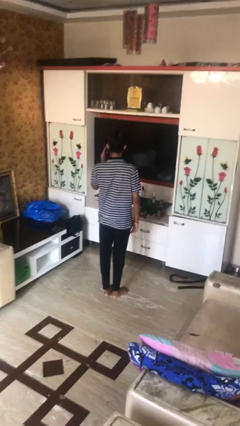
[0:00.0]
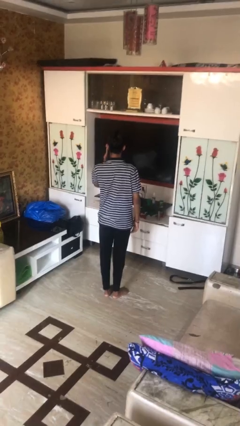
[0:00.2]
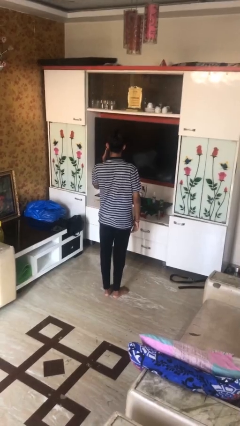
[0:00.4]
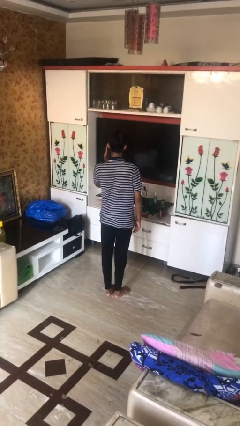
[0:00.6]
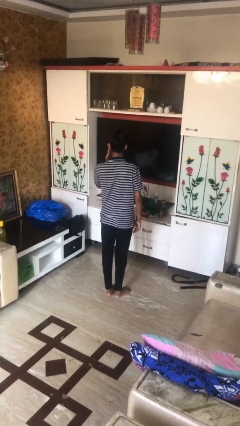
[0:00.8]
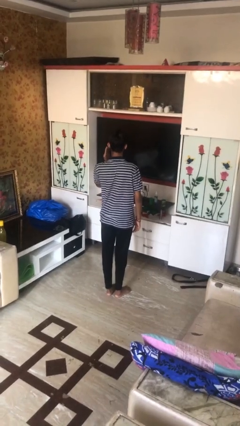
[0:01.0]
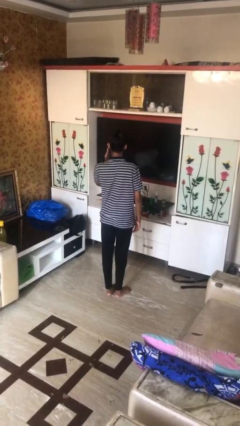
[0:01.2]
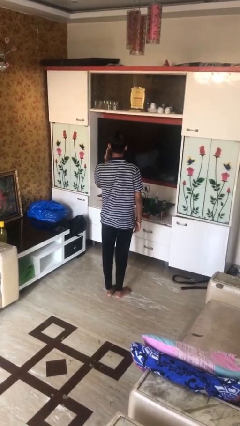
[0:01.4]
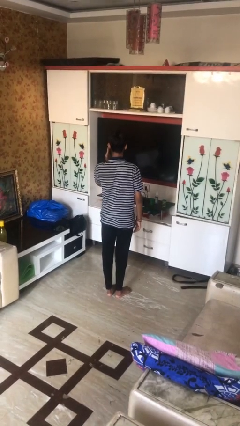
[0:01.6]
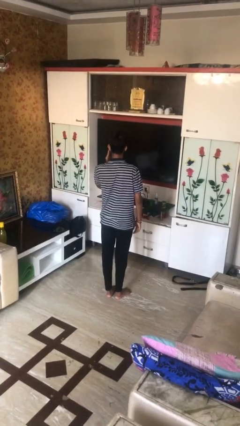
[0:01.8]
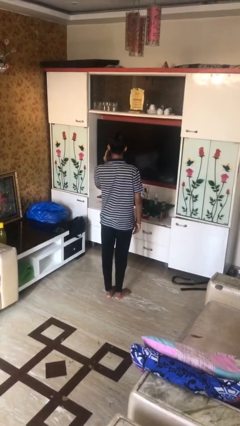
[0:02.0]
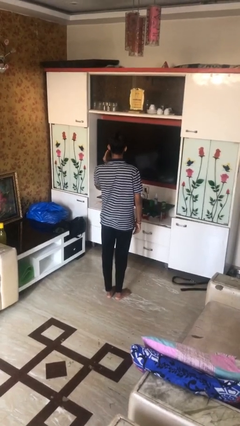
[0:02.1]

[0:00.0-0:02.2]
person touches earlobe

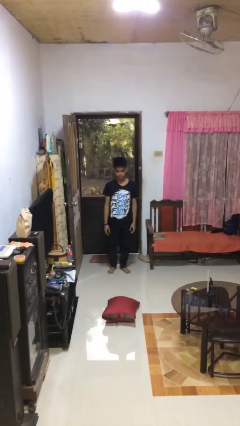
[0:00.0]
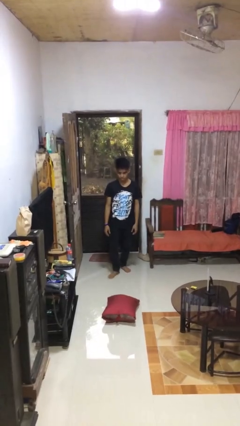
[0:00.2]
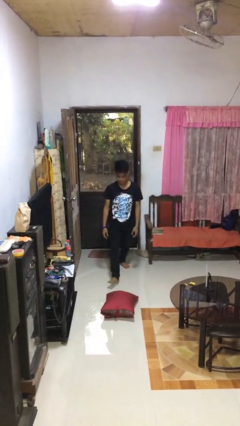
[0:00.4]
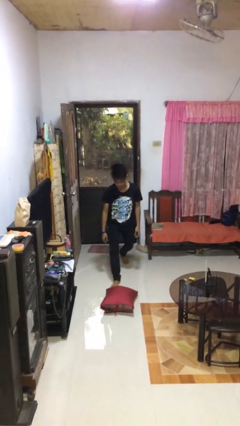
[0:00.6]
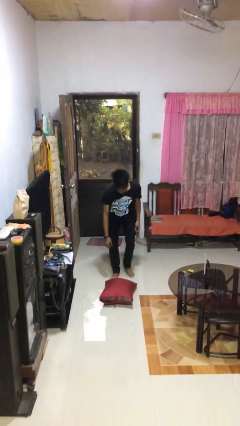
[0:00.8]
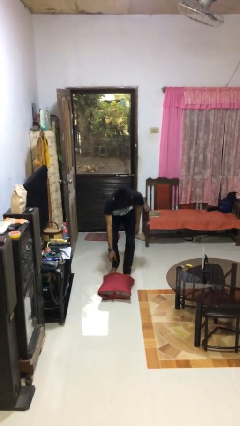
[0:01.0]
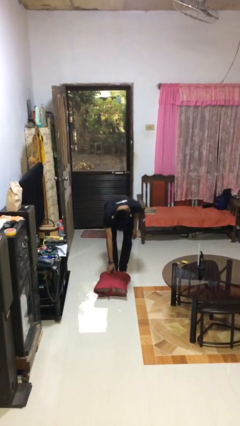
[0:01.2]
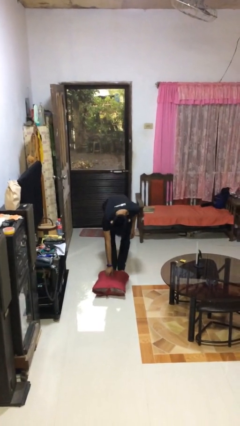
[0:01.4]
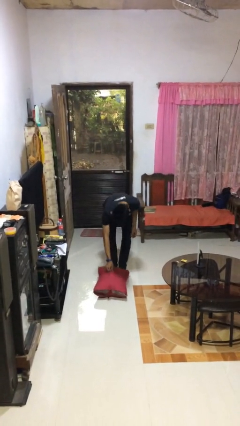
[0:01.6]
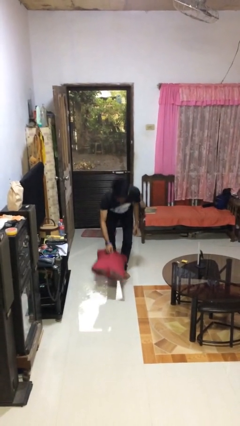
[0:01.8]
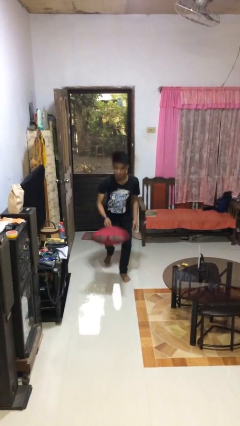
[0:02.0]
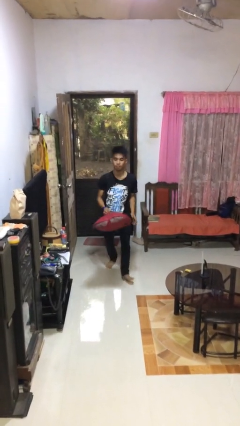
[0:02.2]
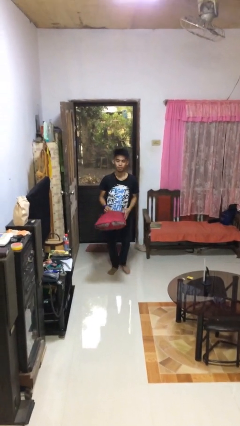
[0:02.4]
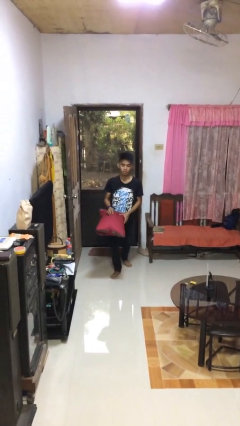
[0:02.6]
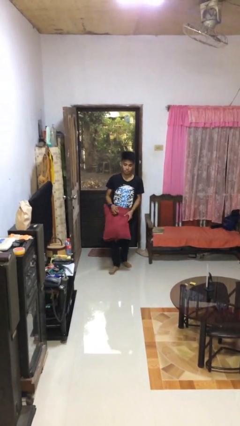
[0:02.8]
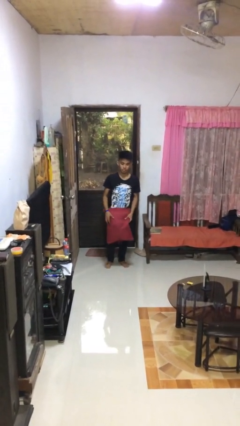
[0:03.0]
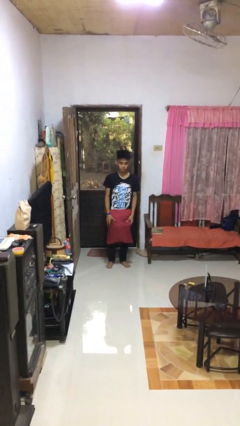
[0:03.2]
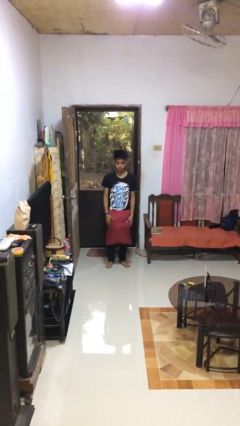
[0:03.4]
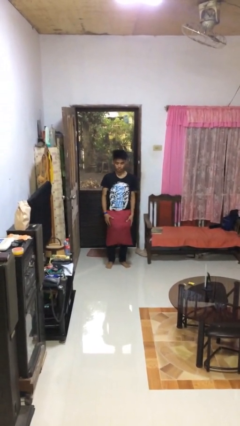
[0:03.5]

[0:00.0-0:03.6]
person picks up object from floor

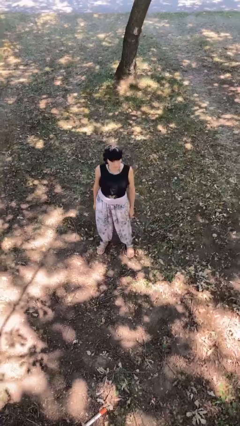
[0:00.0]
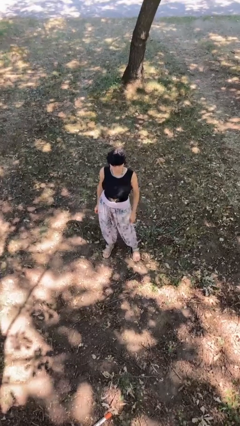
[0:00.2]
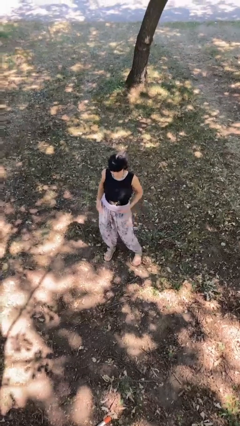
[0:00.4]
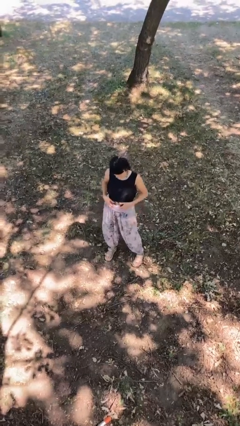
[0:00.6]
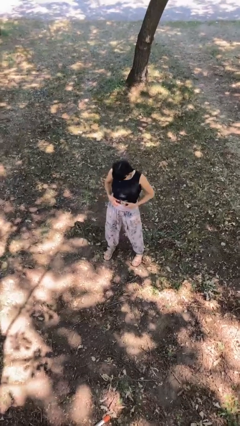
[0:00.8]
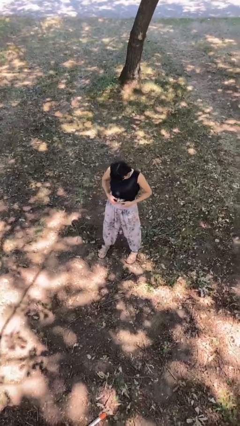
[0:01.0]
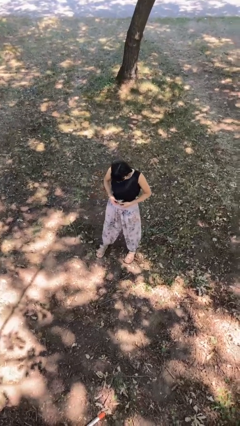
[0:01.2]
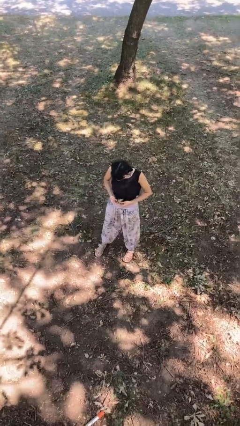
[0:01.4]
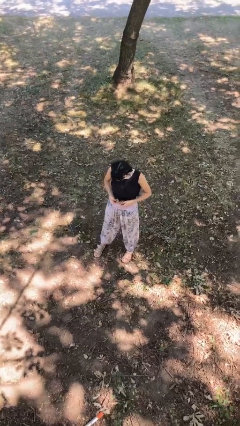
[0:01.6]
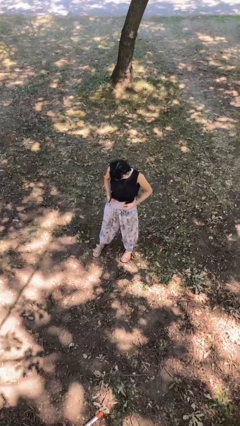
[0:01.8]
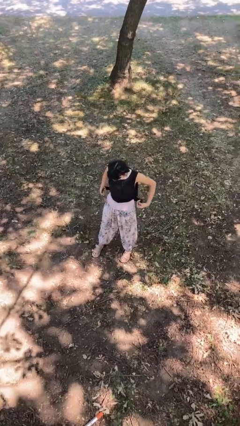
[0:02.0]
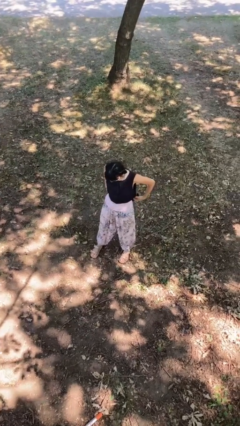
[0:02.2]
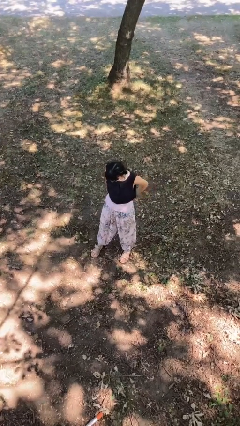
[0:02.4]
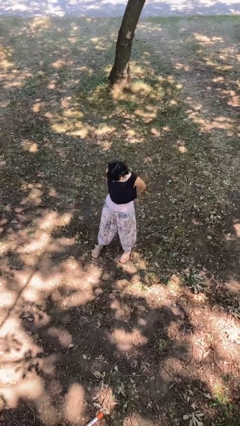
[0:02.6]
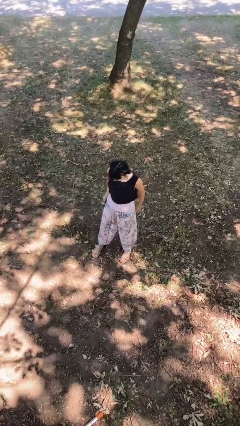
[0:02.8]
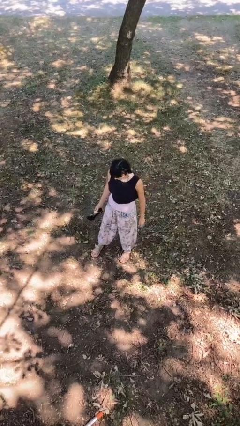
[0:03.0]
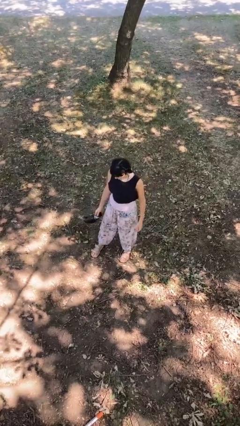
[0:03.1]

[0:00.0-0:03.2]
person takes off belt

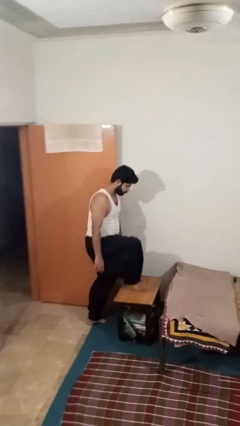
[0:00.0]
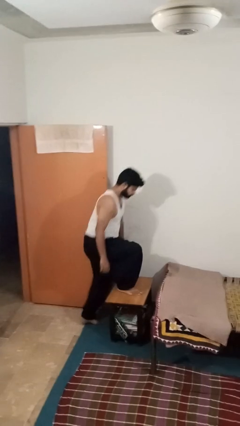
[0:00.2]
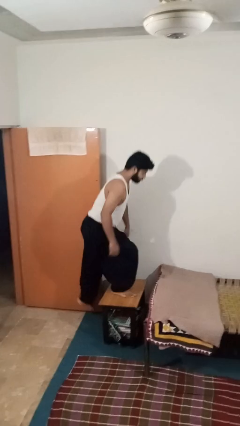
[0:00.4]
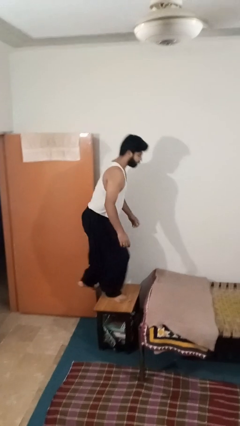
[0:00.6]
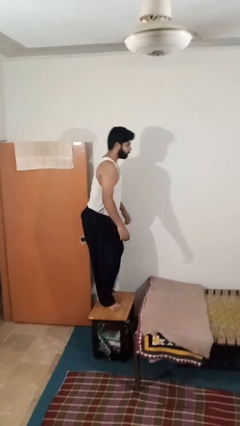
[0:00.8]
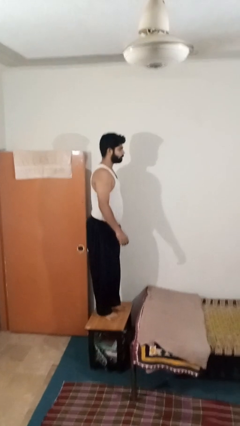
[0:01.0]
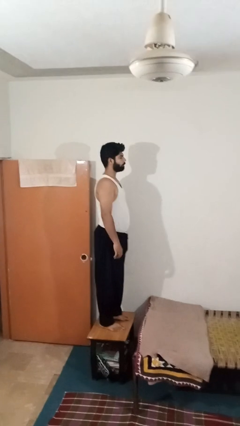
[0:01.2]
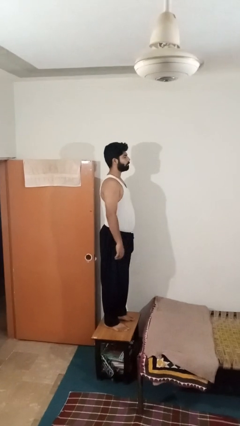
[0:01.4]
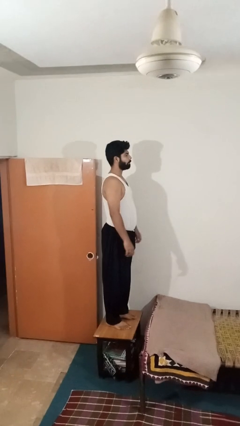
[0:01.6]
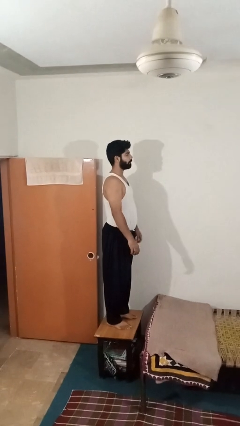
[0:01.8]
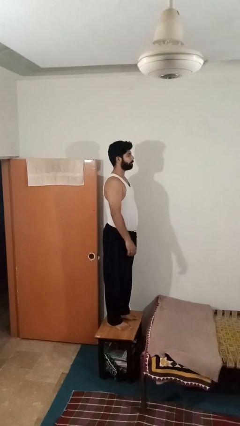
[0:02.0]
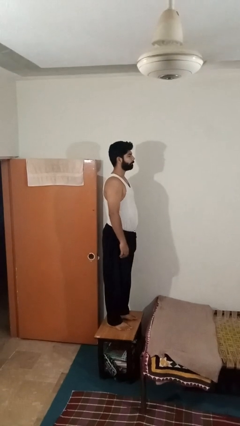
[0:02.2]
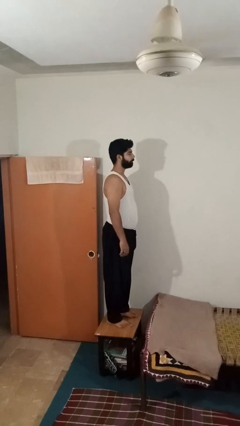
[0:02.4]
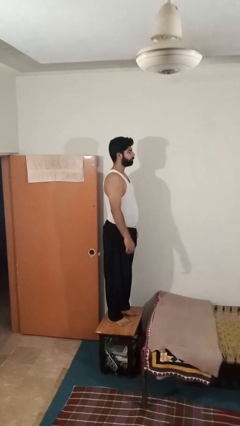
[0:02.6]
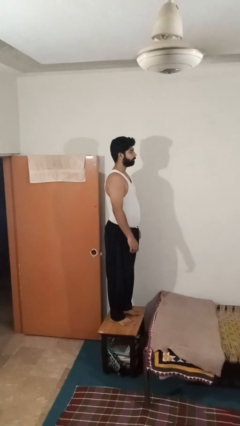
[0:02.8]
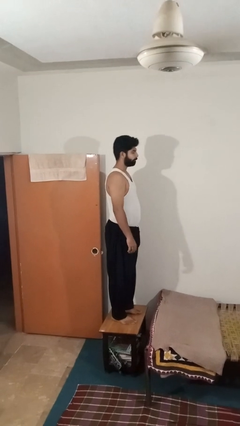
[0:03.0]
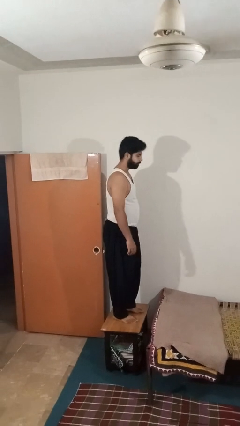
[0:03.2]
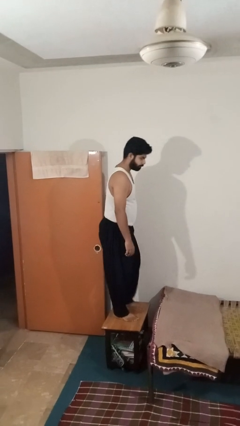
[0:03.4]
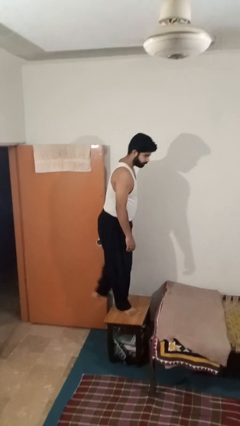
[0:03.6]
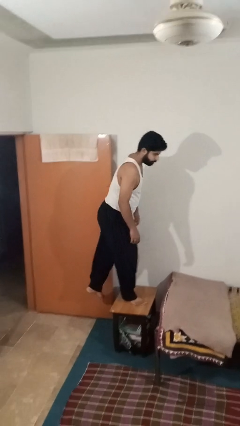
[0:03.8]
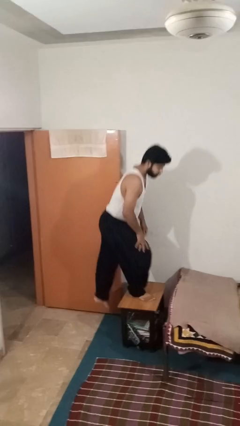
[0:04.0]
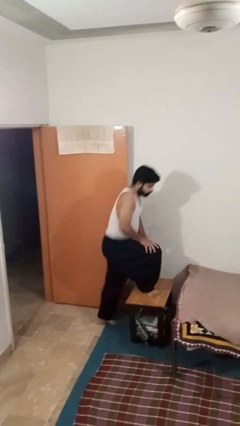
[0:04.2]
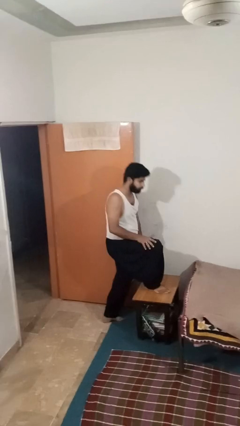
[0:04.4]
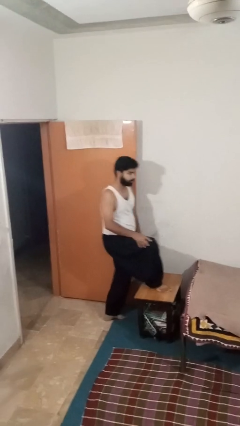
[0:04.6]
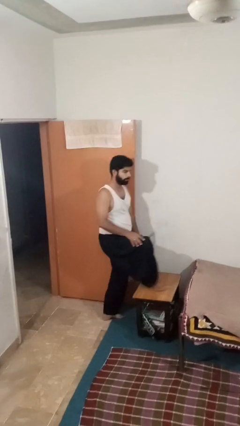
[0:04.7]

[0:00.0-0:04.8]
person climbs on table

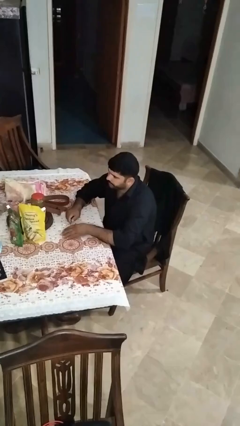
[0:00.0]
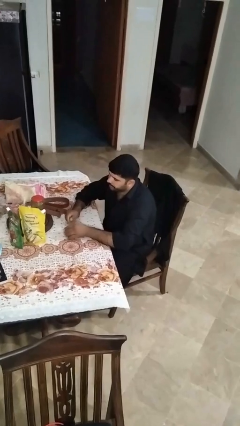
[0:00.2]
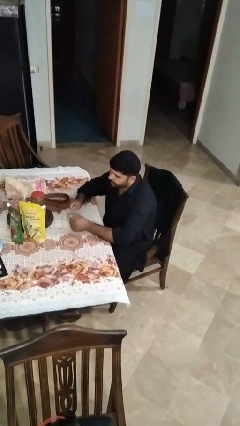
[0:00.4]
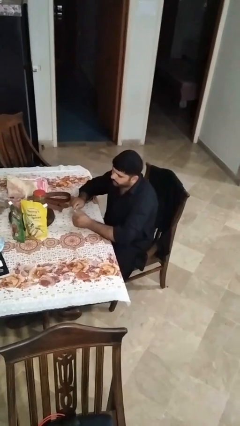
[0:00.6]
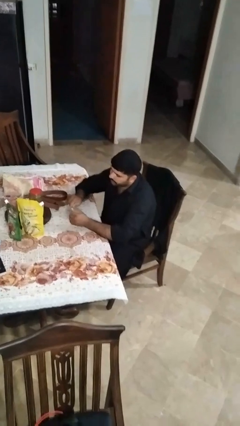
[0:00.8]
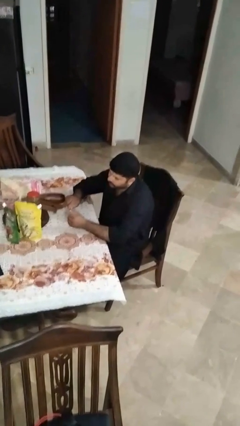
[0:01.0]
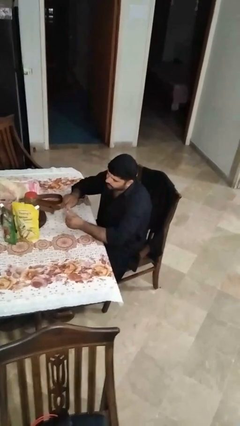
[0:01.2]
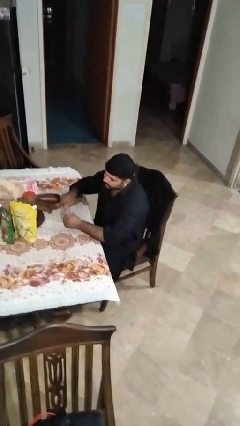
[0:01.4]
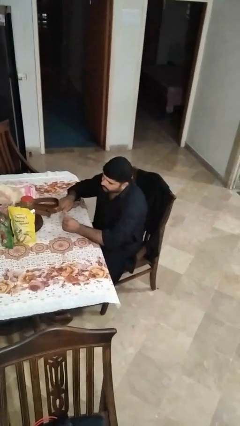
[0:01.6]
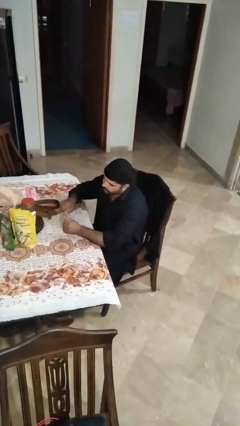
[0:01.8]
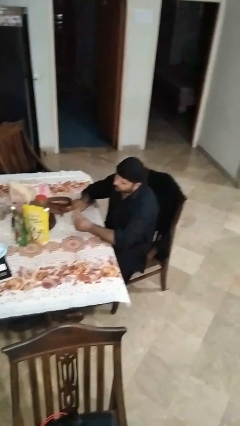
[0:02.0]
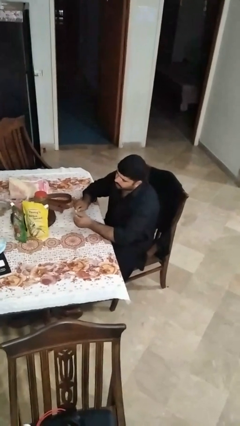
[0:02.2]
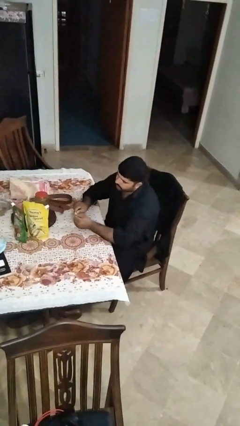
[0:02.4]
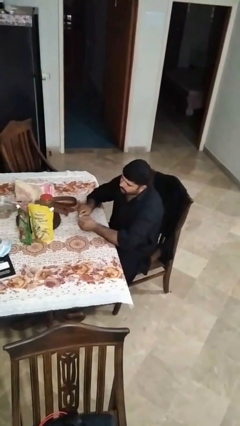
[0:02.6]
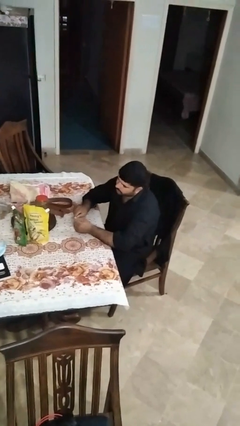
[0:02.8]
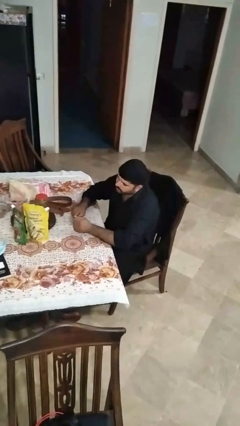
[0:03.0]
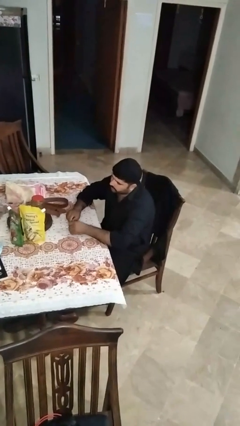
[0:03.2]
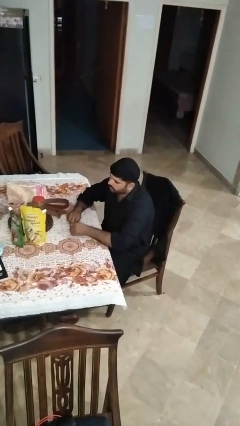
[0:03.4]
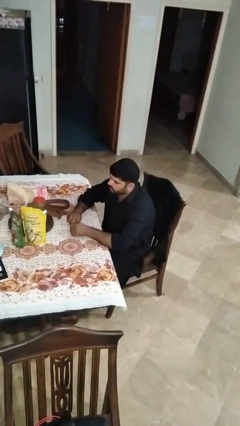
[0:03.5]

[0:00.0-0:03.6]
person files fingernails

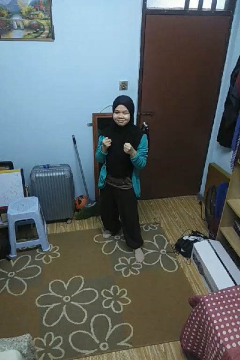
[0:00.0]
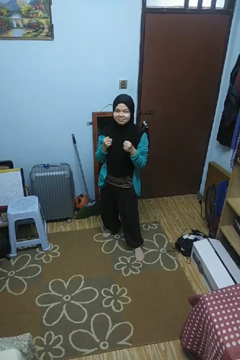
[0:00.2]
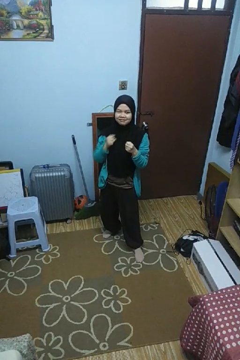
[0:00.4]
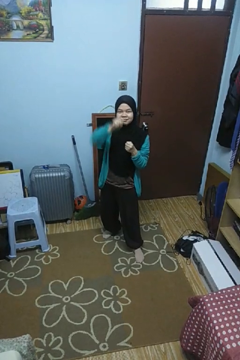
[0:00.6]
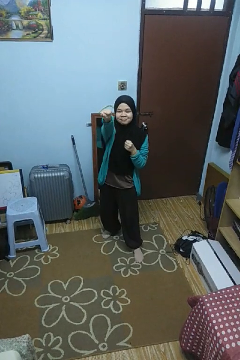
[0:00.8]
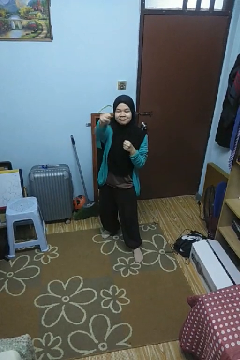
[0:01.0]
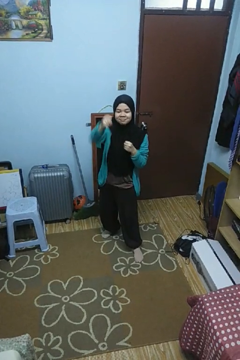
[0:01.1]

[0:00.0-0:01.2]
person punches
